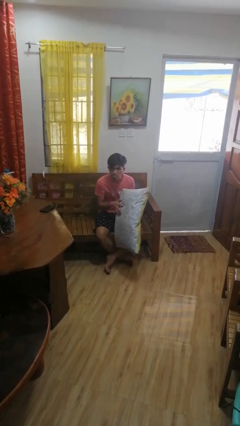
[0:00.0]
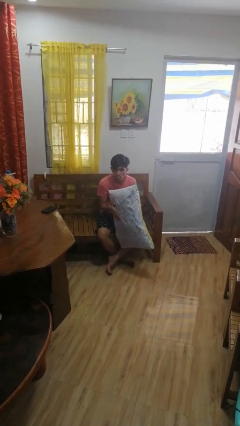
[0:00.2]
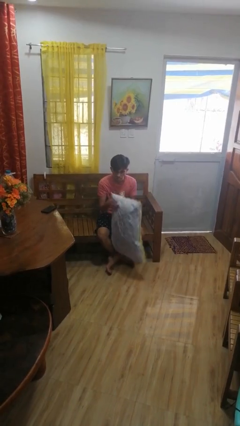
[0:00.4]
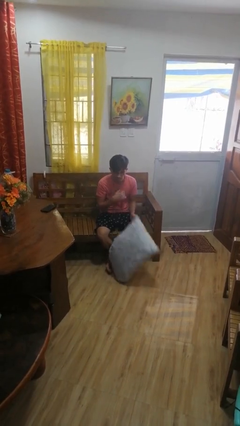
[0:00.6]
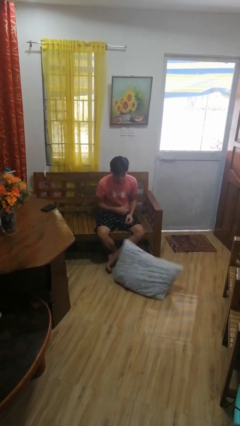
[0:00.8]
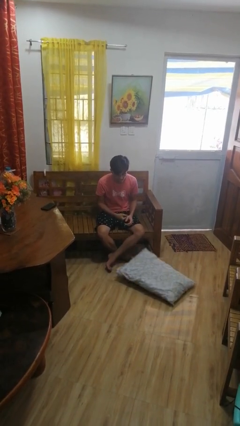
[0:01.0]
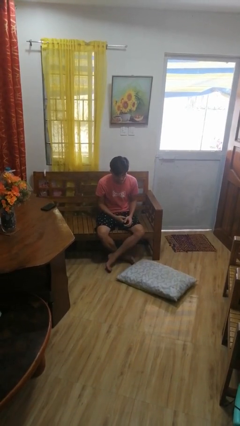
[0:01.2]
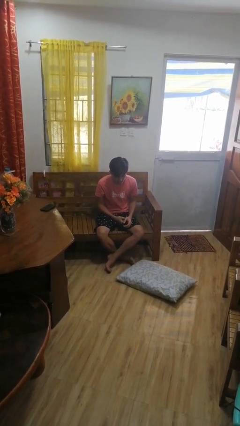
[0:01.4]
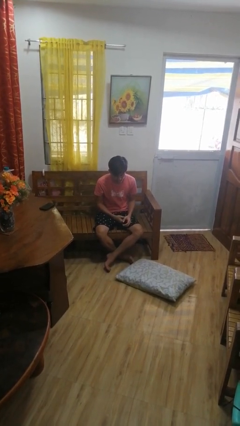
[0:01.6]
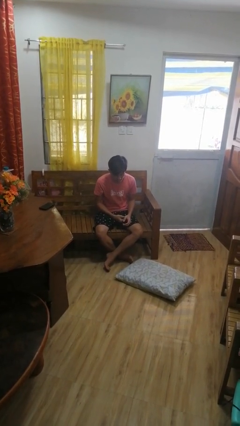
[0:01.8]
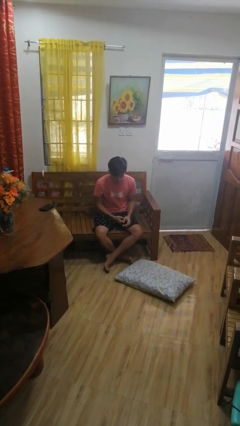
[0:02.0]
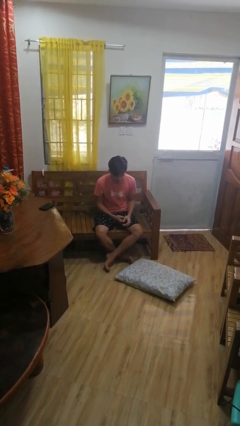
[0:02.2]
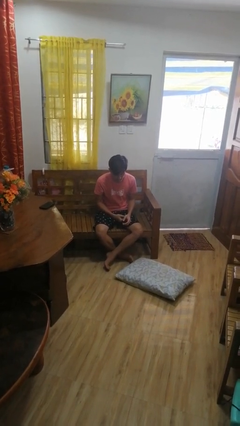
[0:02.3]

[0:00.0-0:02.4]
person drops object

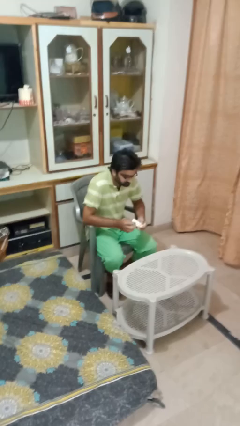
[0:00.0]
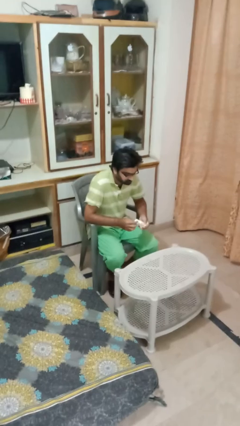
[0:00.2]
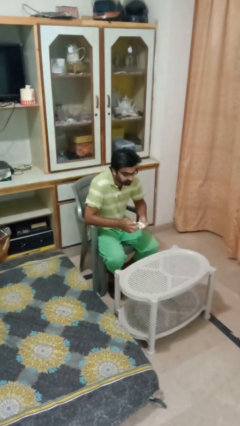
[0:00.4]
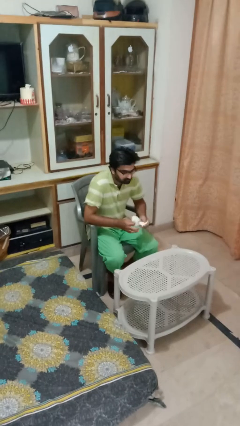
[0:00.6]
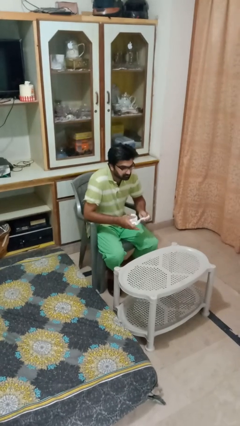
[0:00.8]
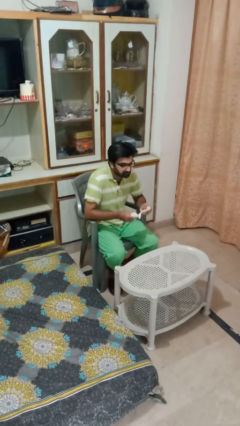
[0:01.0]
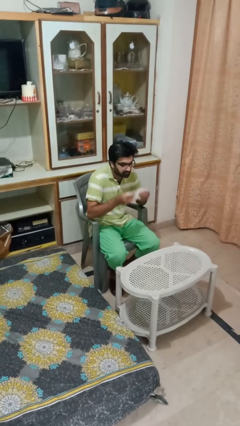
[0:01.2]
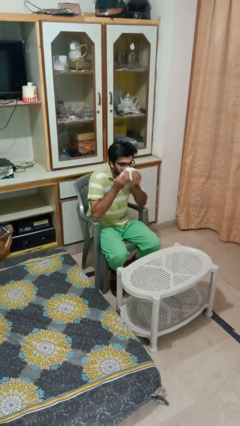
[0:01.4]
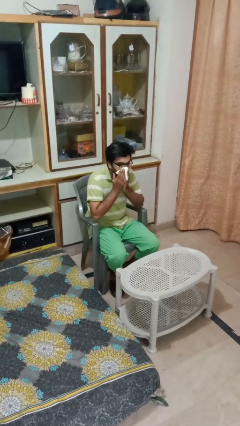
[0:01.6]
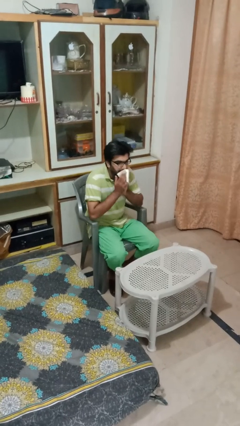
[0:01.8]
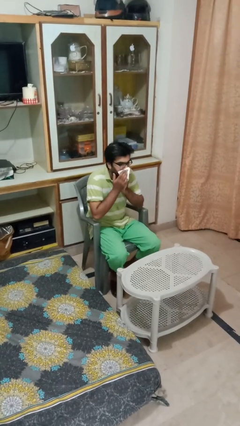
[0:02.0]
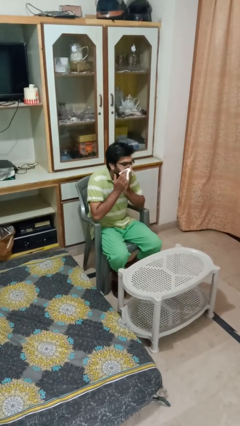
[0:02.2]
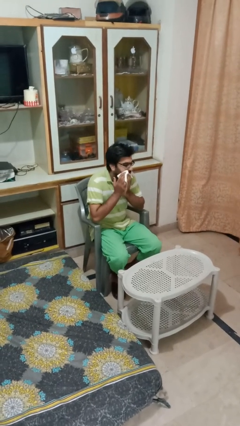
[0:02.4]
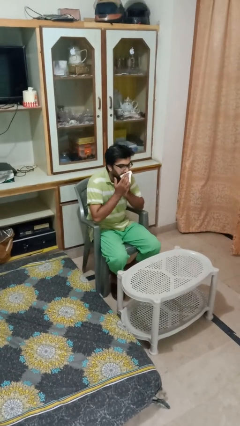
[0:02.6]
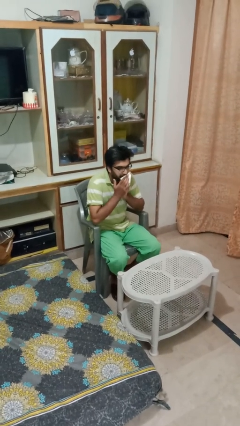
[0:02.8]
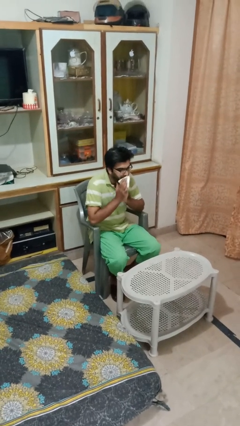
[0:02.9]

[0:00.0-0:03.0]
person wipes mouth with napkin

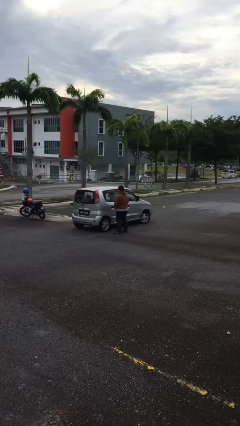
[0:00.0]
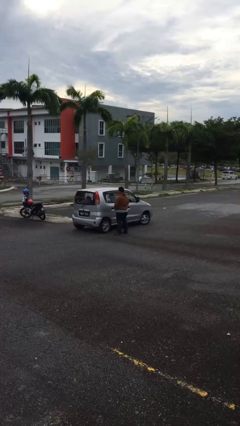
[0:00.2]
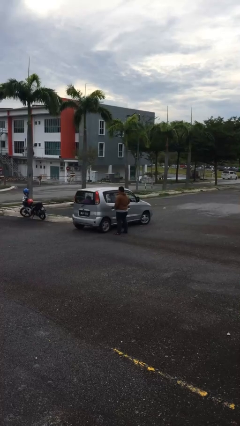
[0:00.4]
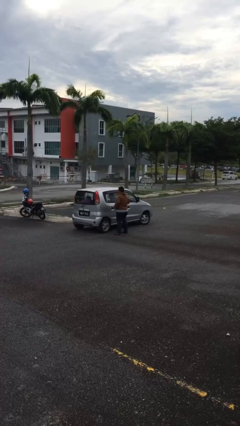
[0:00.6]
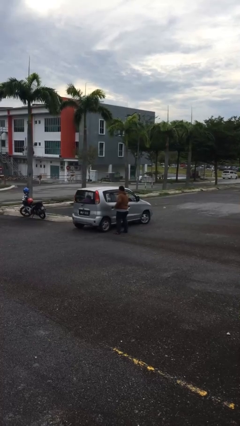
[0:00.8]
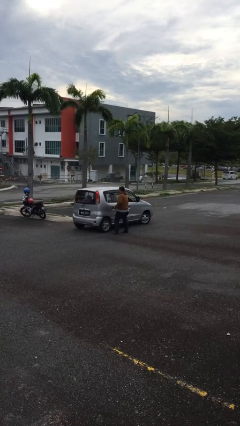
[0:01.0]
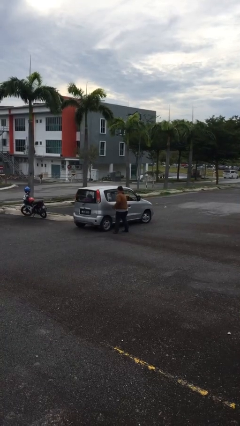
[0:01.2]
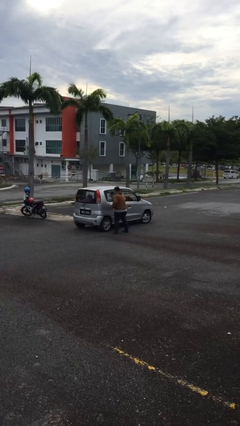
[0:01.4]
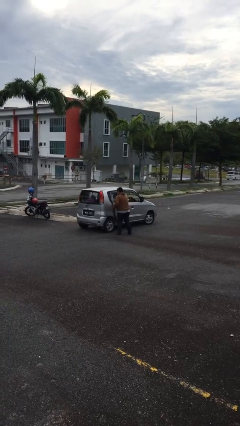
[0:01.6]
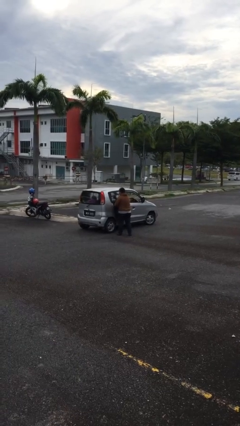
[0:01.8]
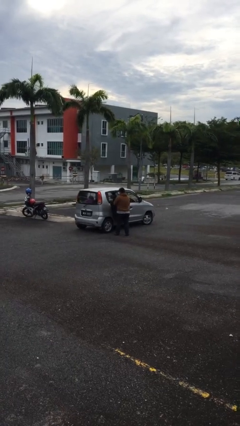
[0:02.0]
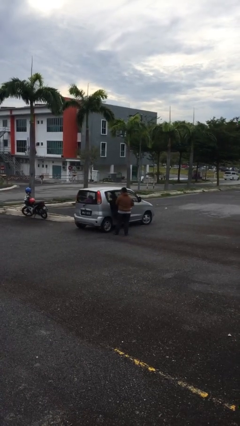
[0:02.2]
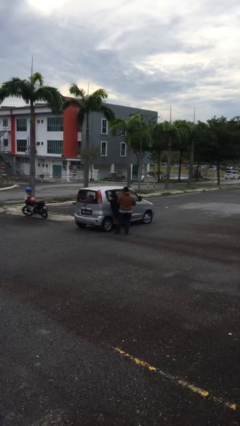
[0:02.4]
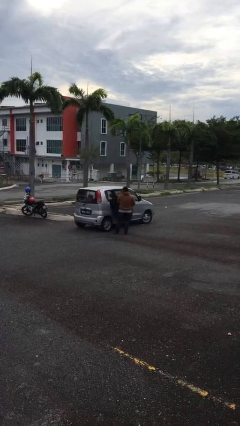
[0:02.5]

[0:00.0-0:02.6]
person opens car door

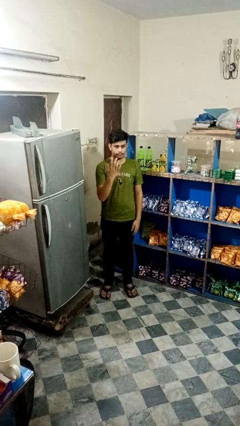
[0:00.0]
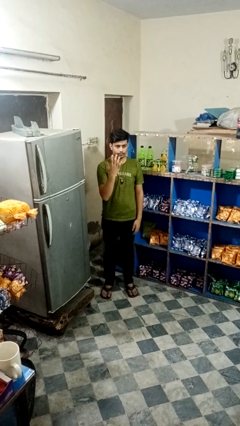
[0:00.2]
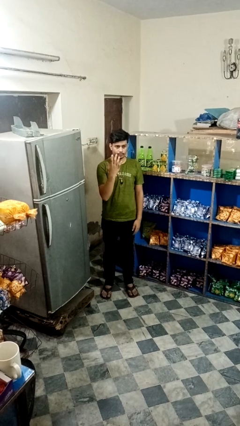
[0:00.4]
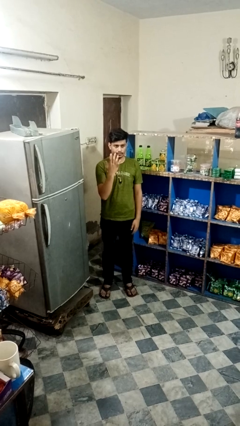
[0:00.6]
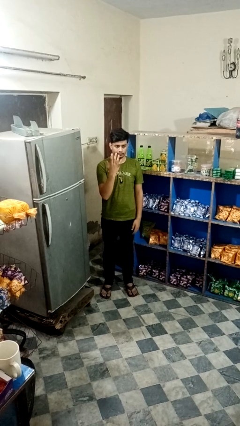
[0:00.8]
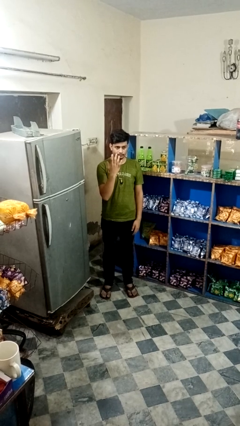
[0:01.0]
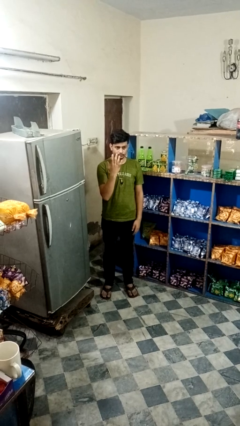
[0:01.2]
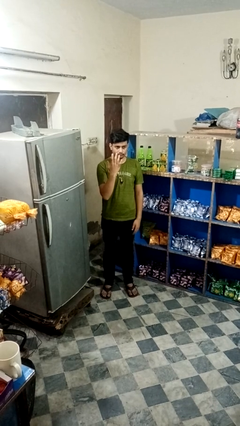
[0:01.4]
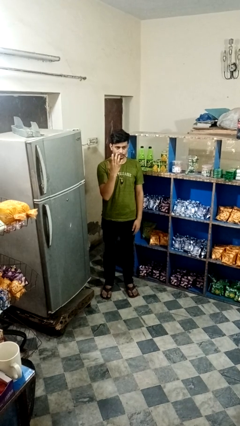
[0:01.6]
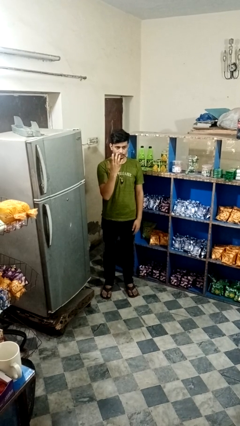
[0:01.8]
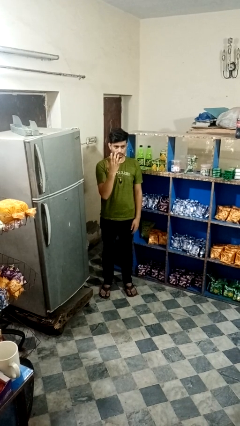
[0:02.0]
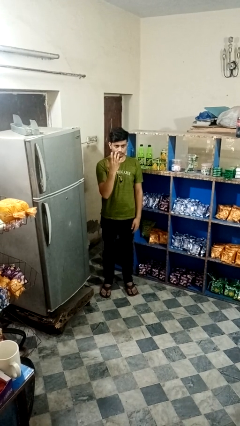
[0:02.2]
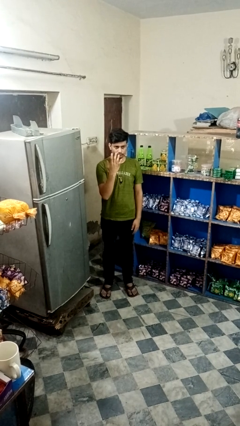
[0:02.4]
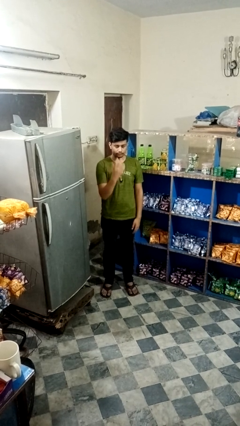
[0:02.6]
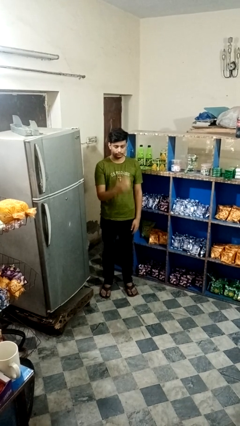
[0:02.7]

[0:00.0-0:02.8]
person gestures number five

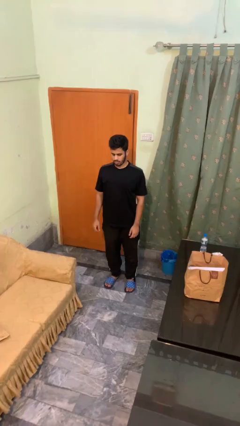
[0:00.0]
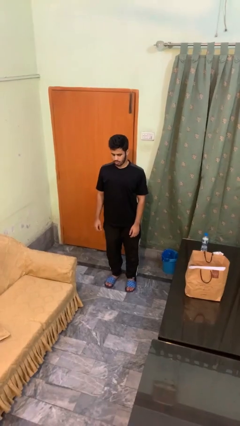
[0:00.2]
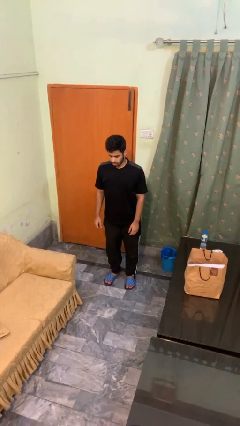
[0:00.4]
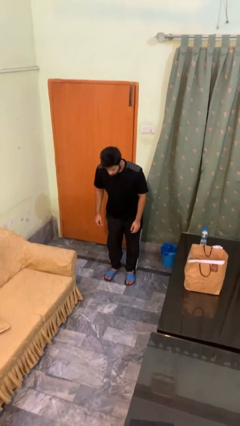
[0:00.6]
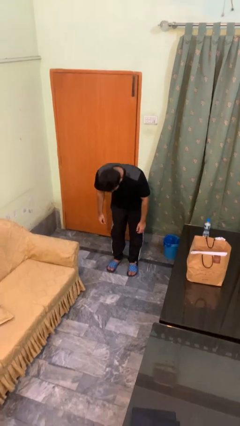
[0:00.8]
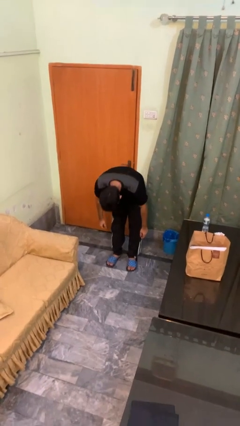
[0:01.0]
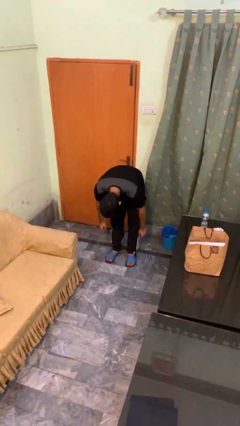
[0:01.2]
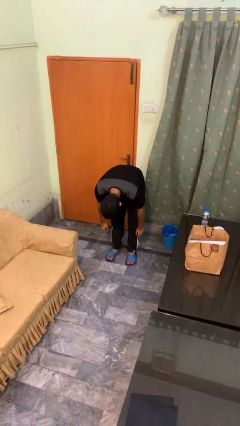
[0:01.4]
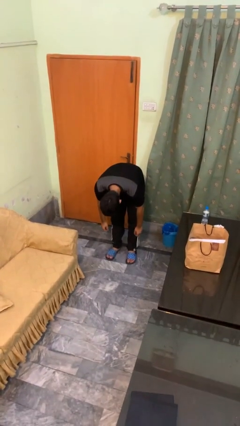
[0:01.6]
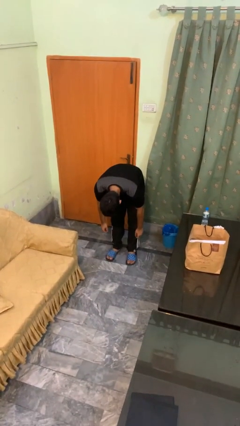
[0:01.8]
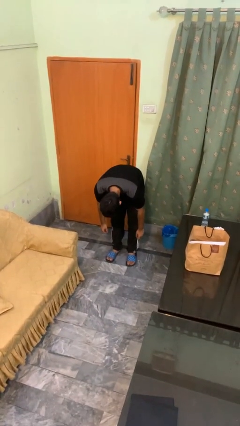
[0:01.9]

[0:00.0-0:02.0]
person bows

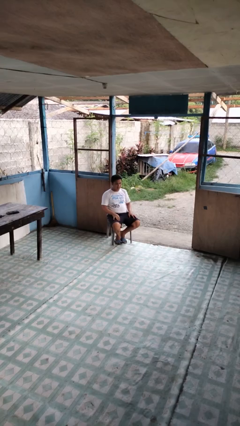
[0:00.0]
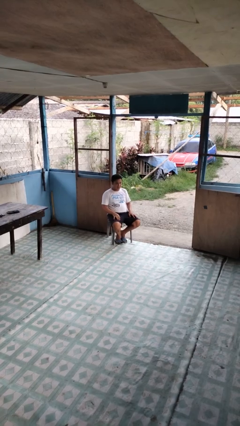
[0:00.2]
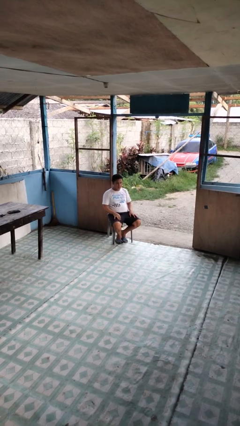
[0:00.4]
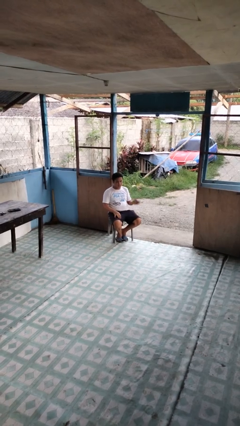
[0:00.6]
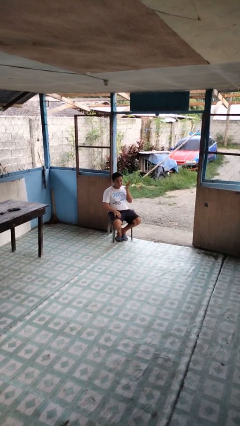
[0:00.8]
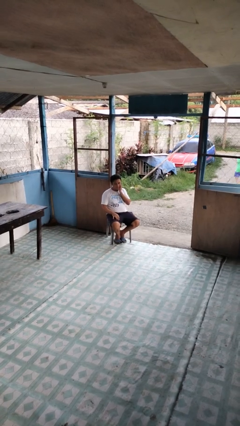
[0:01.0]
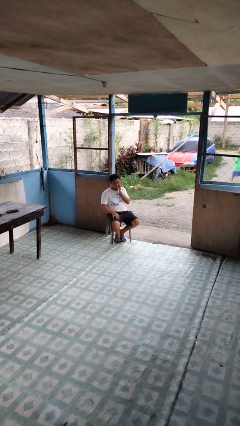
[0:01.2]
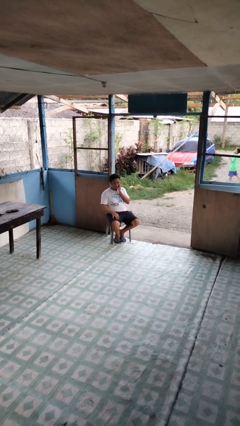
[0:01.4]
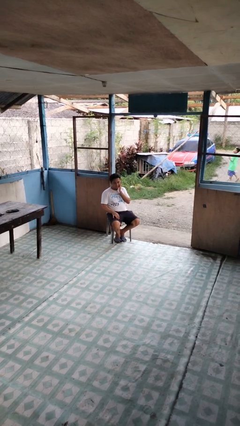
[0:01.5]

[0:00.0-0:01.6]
person swats bug

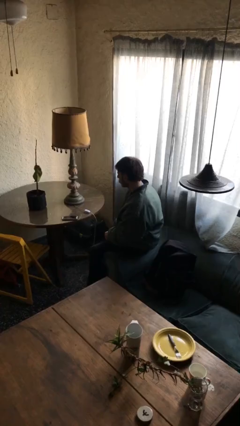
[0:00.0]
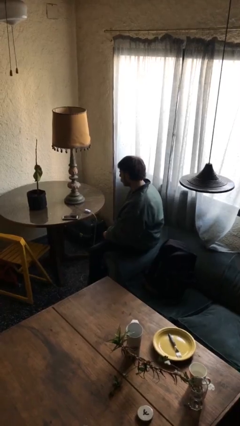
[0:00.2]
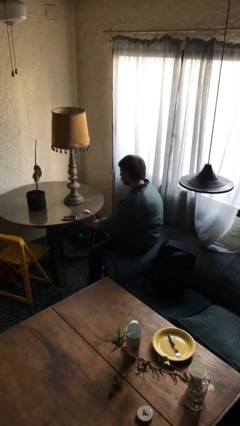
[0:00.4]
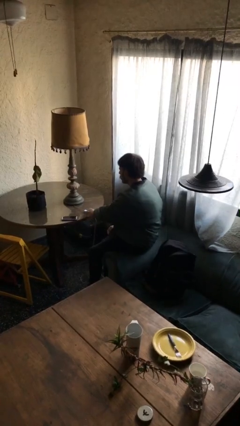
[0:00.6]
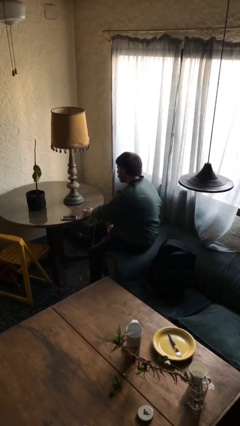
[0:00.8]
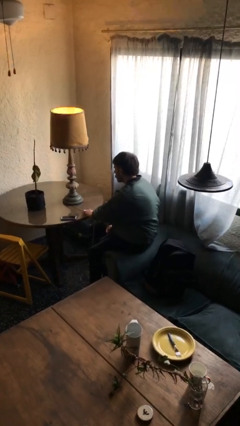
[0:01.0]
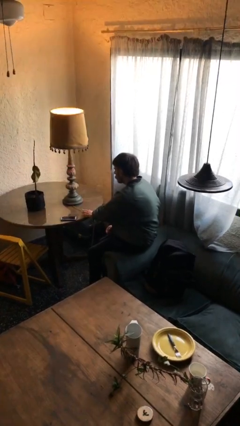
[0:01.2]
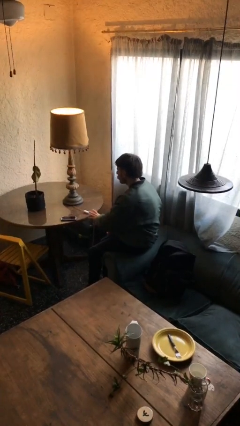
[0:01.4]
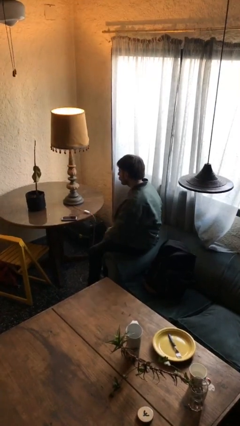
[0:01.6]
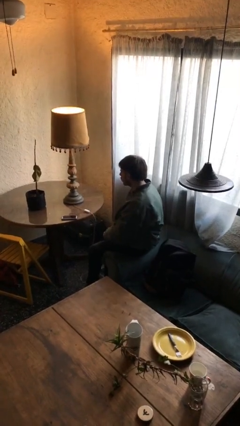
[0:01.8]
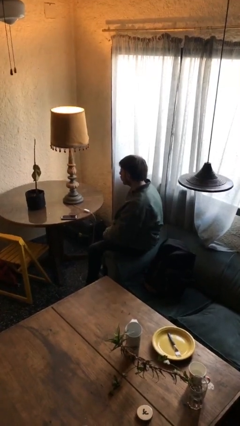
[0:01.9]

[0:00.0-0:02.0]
person turns on lamp

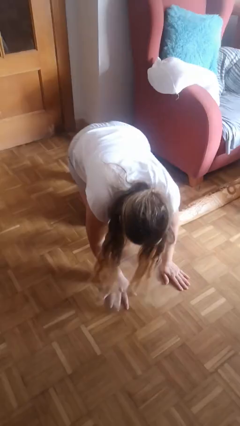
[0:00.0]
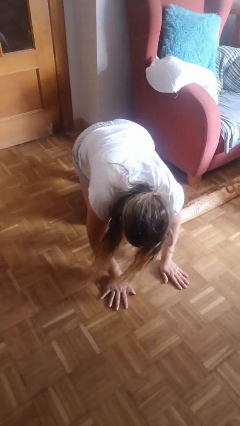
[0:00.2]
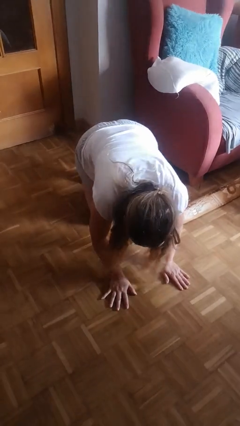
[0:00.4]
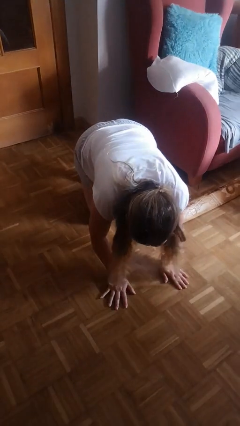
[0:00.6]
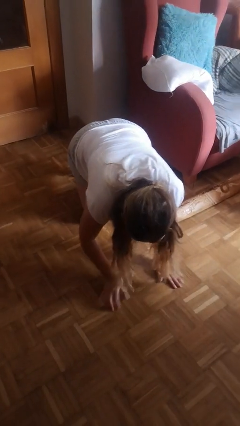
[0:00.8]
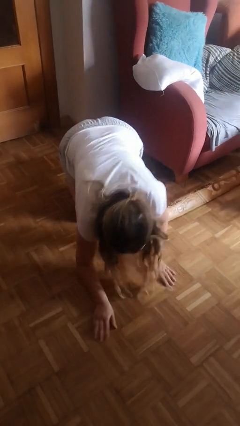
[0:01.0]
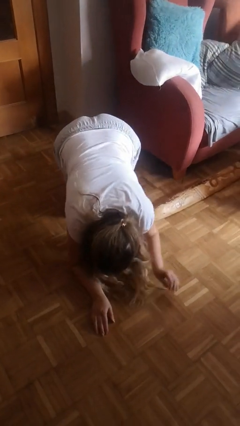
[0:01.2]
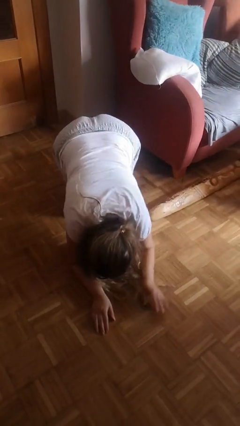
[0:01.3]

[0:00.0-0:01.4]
person lies down on floor
